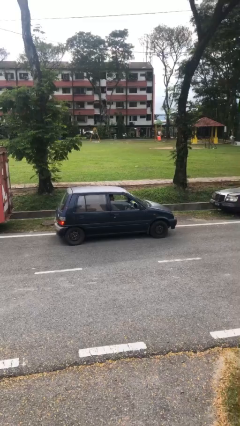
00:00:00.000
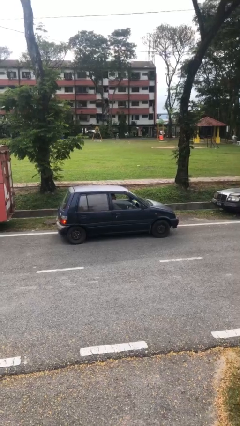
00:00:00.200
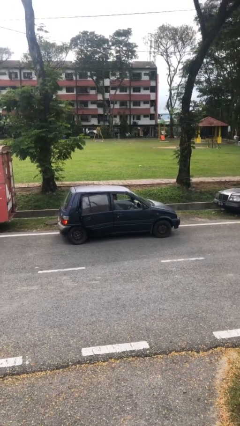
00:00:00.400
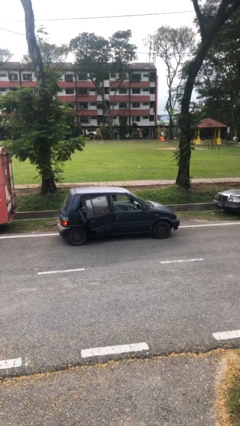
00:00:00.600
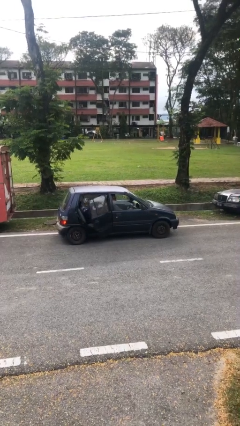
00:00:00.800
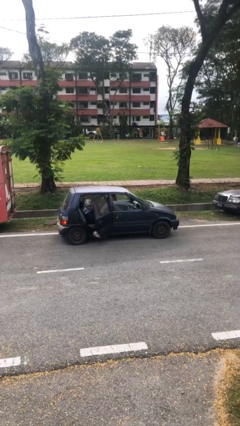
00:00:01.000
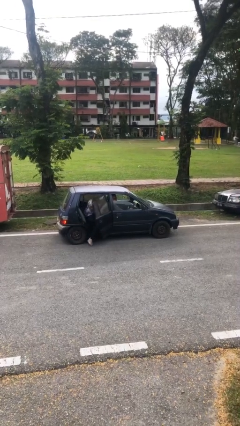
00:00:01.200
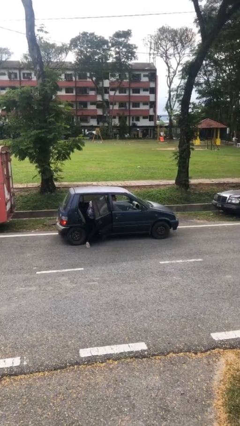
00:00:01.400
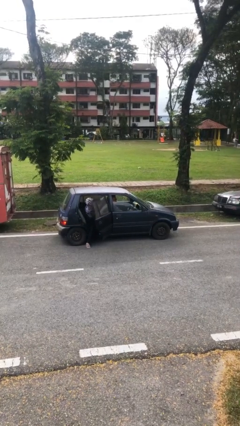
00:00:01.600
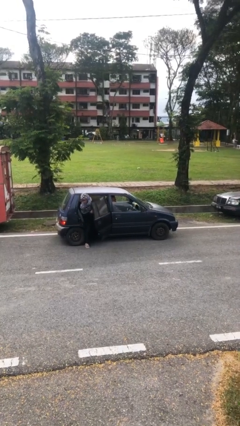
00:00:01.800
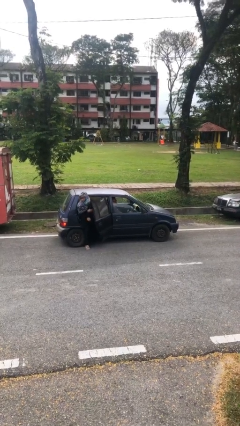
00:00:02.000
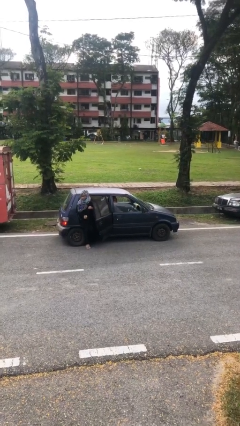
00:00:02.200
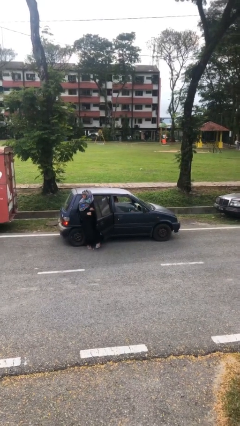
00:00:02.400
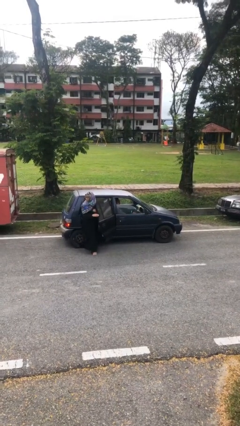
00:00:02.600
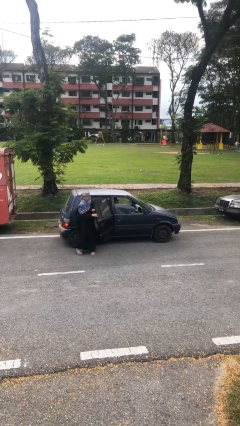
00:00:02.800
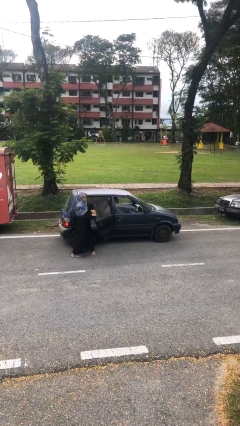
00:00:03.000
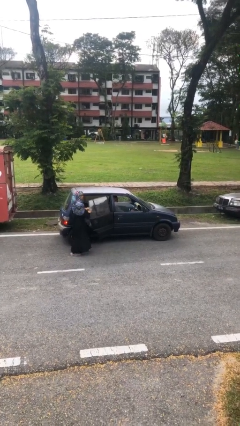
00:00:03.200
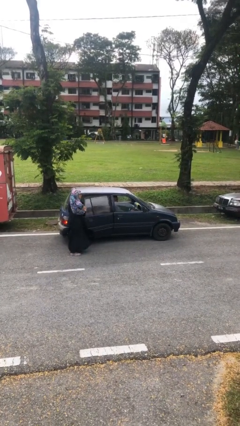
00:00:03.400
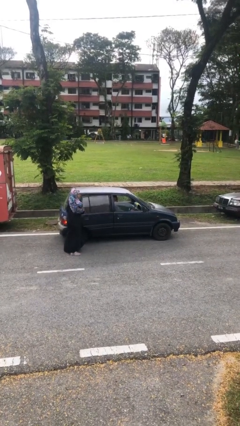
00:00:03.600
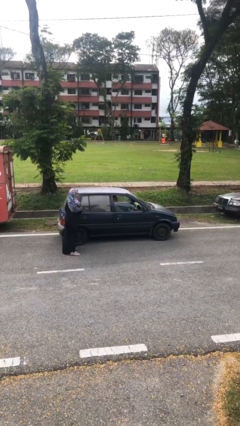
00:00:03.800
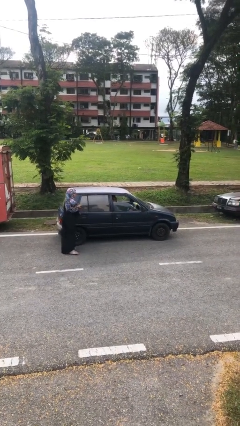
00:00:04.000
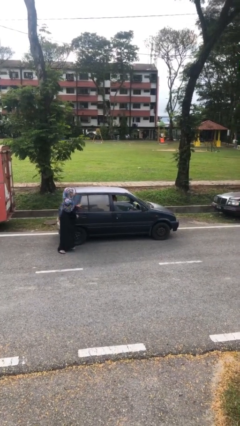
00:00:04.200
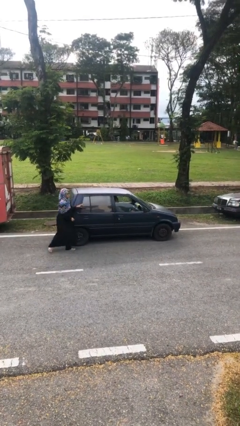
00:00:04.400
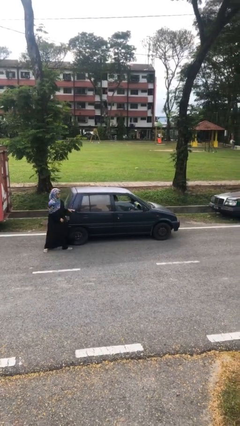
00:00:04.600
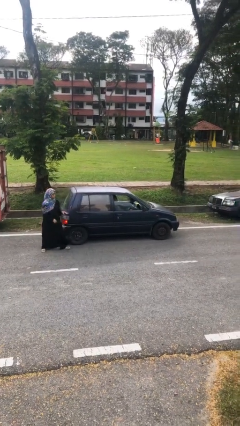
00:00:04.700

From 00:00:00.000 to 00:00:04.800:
car drops off person

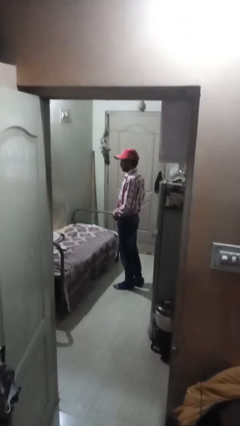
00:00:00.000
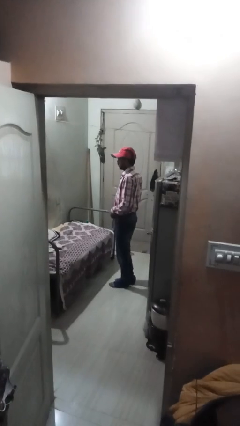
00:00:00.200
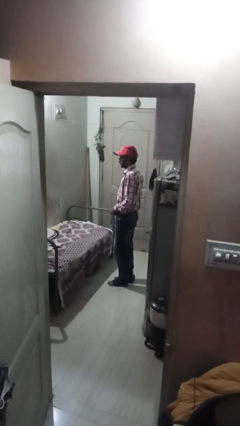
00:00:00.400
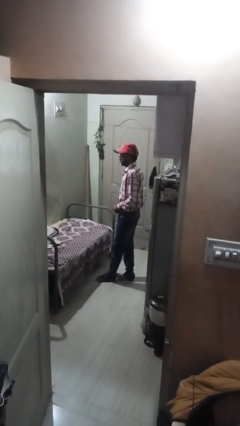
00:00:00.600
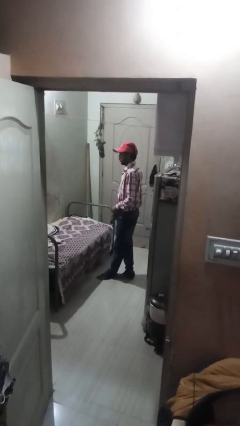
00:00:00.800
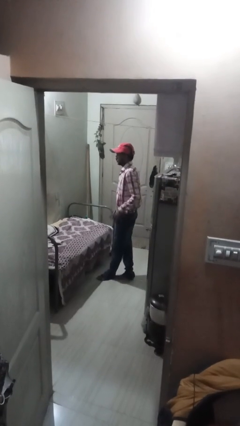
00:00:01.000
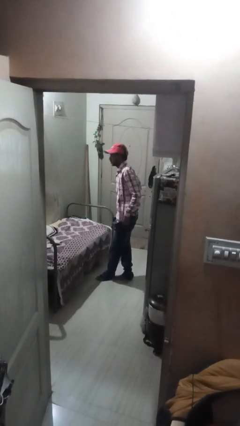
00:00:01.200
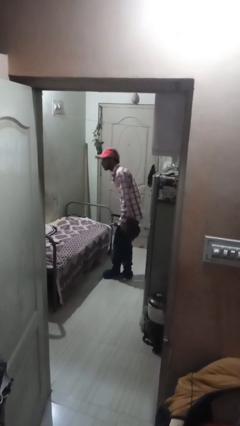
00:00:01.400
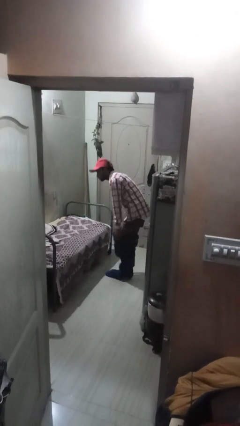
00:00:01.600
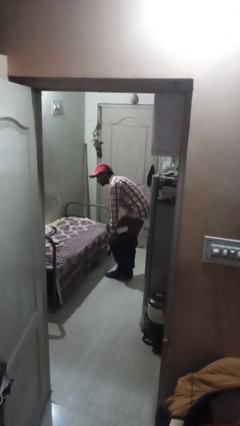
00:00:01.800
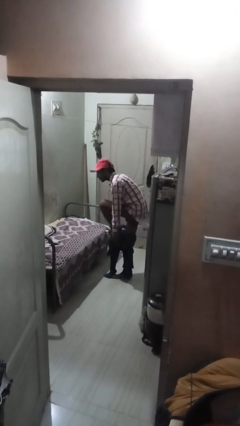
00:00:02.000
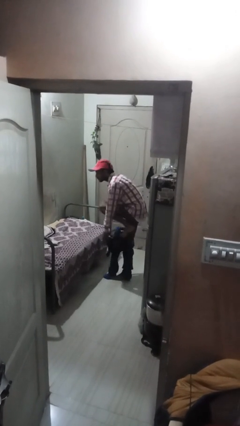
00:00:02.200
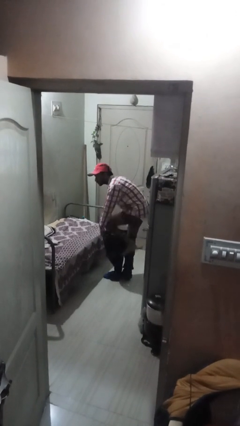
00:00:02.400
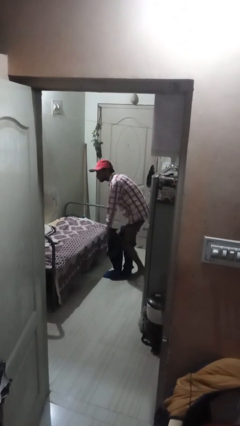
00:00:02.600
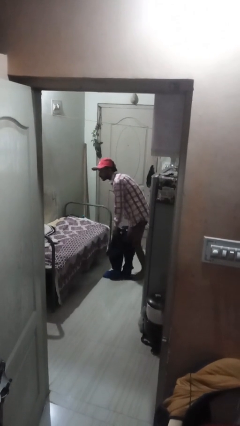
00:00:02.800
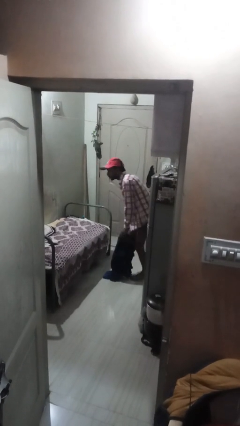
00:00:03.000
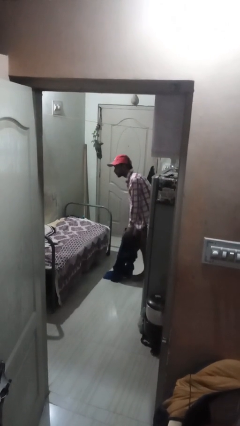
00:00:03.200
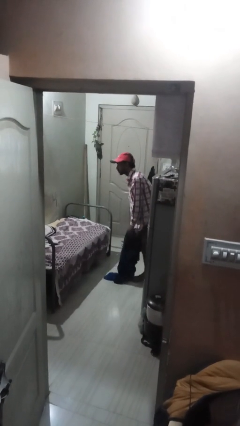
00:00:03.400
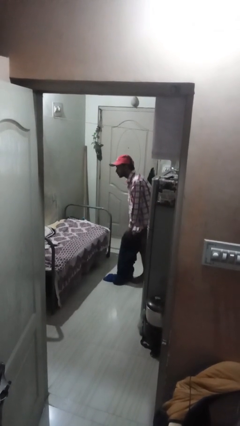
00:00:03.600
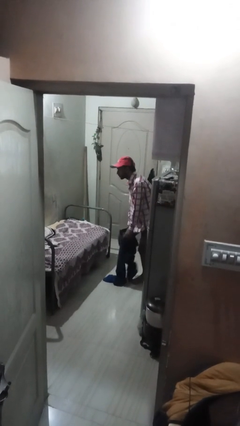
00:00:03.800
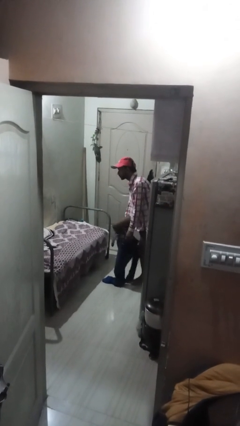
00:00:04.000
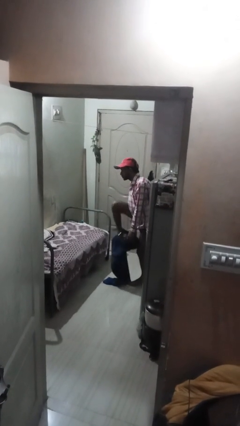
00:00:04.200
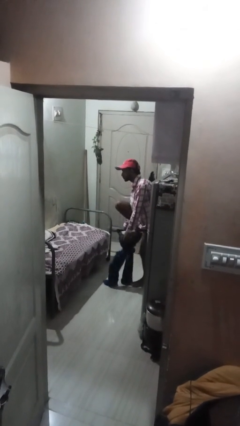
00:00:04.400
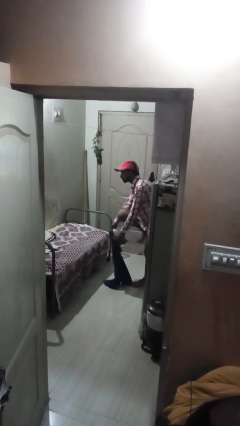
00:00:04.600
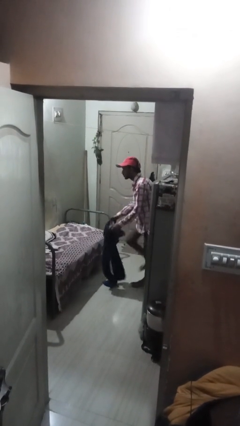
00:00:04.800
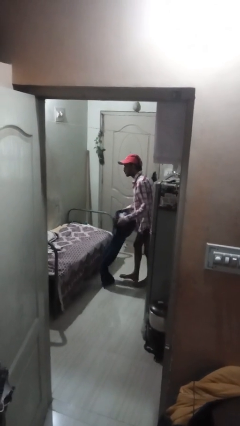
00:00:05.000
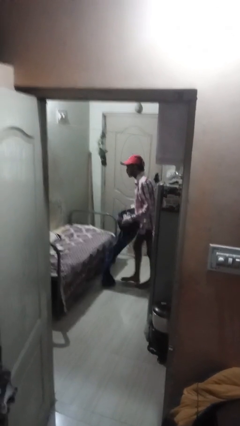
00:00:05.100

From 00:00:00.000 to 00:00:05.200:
person takes off pants

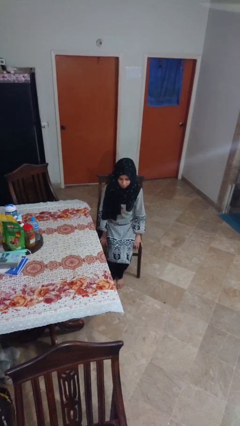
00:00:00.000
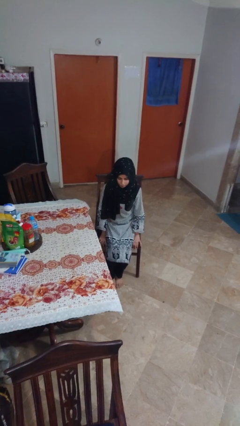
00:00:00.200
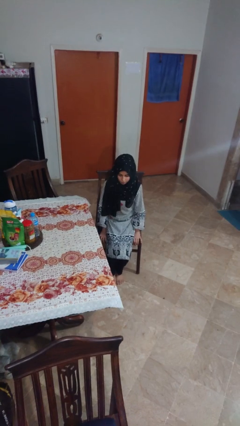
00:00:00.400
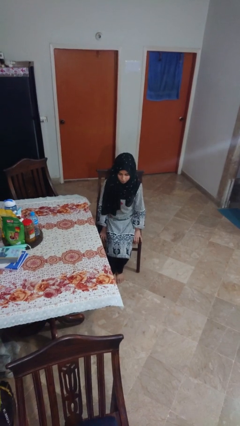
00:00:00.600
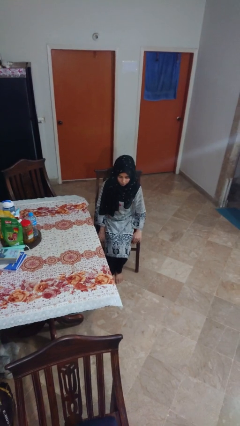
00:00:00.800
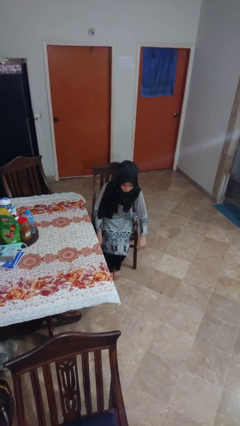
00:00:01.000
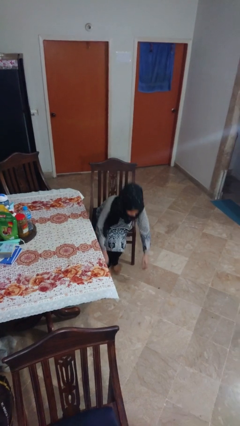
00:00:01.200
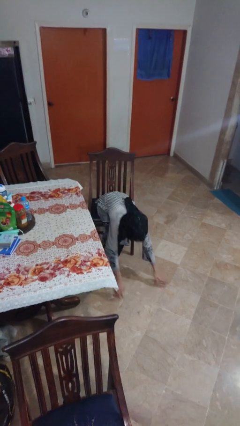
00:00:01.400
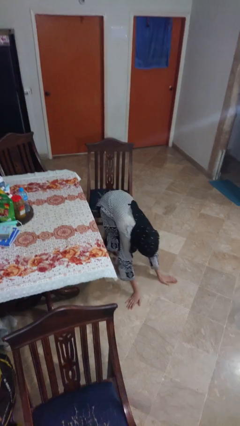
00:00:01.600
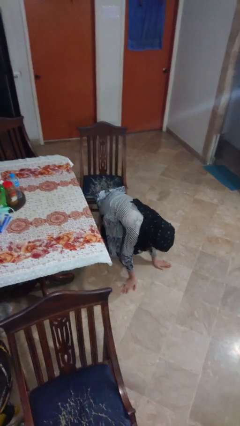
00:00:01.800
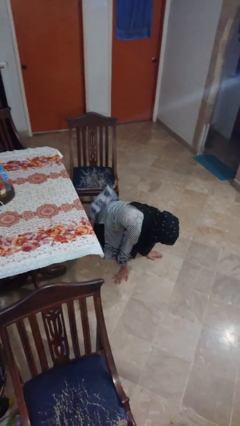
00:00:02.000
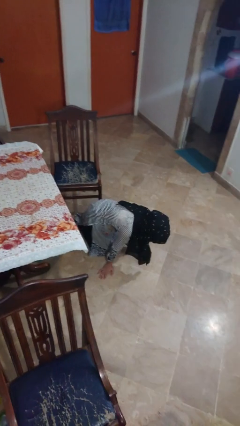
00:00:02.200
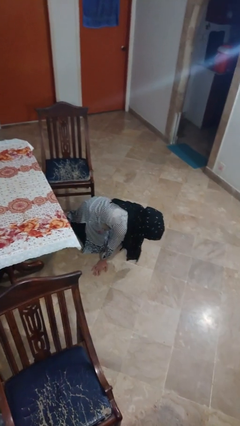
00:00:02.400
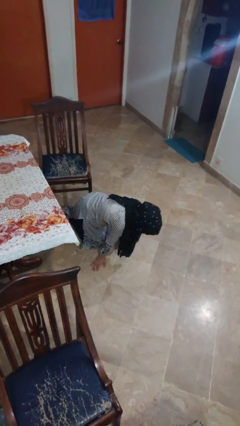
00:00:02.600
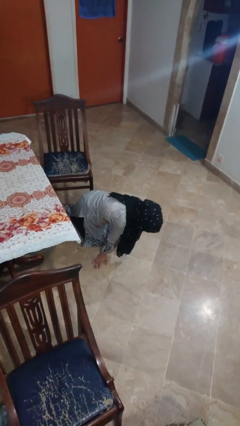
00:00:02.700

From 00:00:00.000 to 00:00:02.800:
person falls from chair

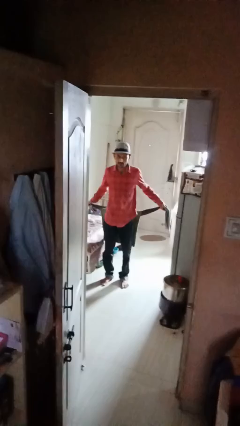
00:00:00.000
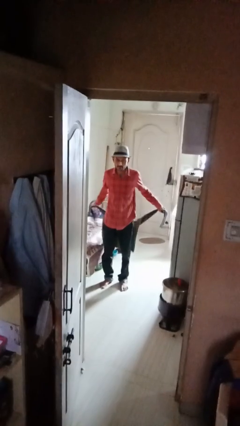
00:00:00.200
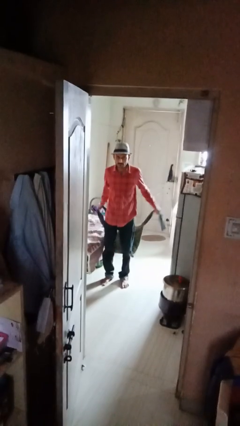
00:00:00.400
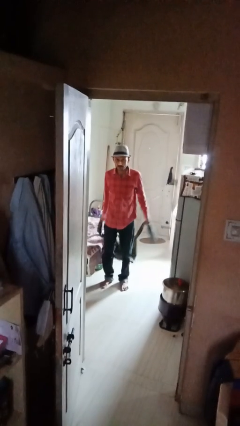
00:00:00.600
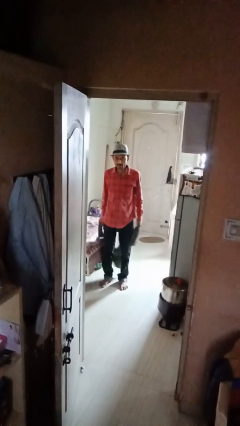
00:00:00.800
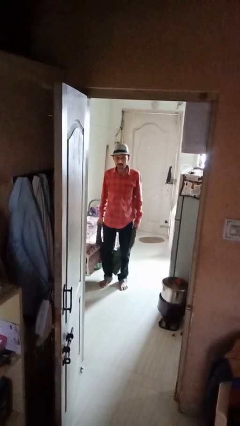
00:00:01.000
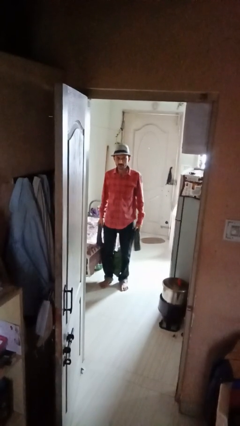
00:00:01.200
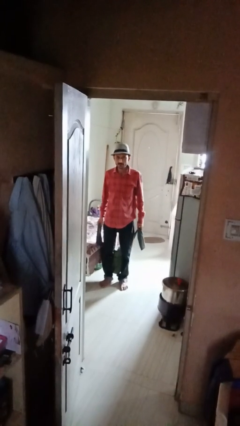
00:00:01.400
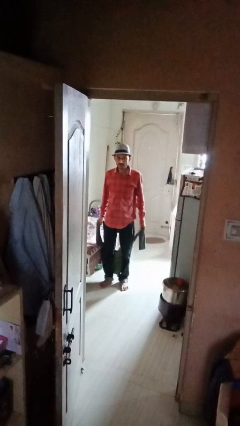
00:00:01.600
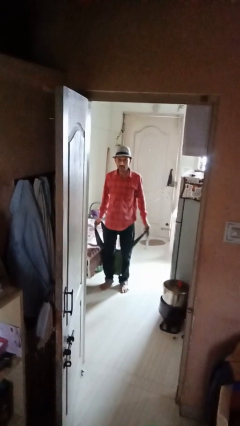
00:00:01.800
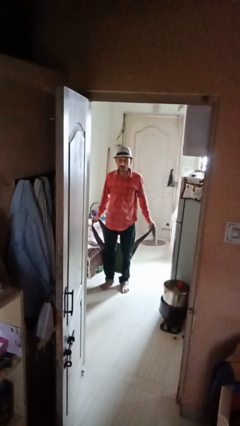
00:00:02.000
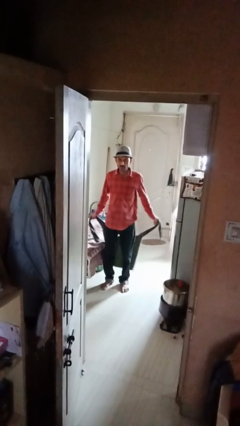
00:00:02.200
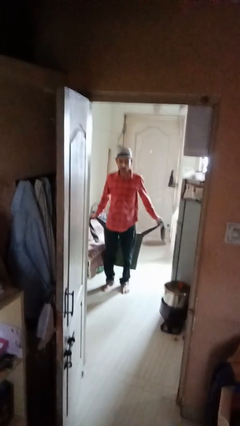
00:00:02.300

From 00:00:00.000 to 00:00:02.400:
person unties jacket around waist

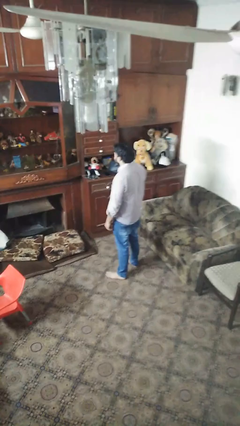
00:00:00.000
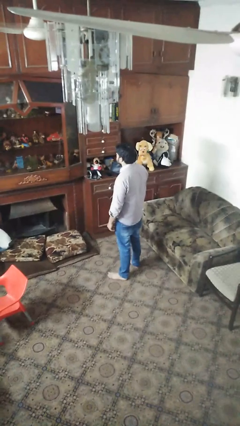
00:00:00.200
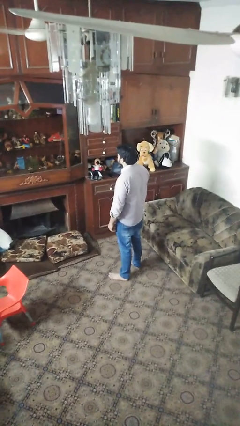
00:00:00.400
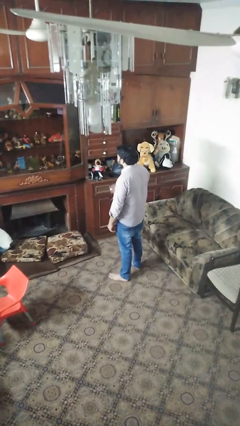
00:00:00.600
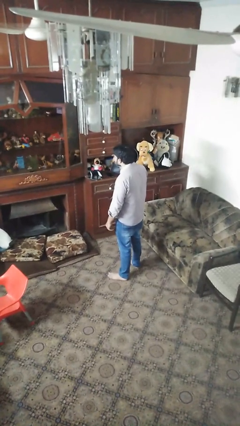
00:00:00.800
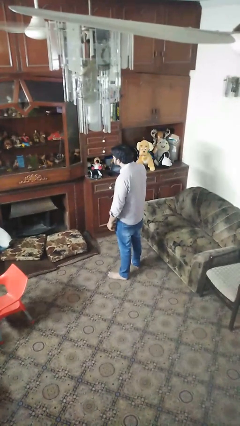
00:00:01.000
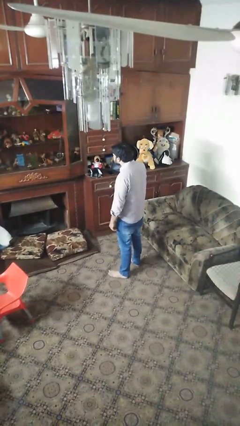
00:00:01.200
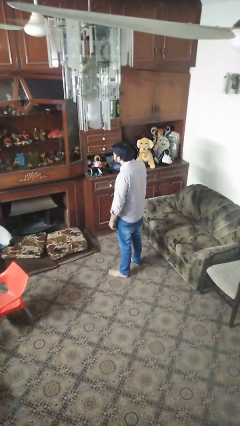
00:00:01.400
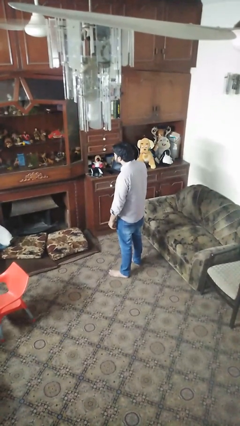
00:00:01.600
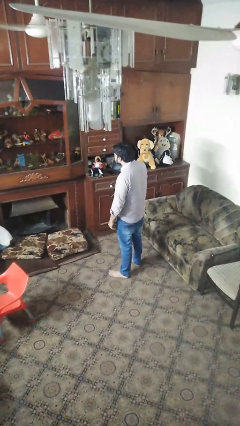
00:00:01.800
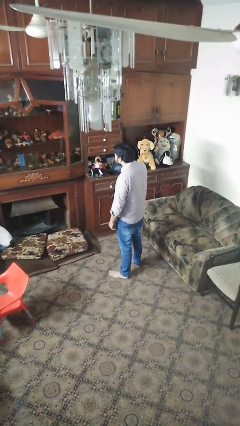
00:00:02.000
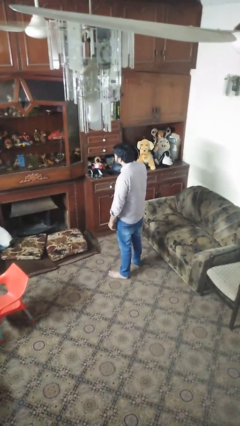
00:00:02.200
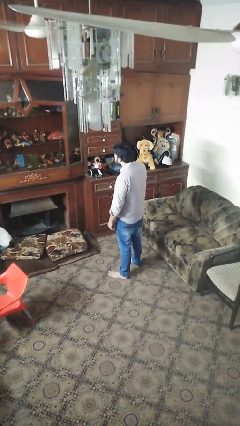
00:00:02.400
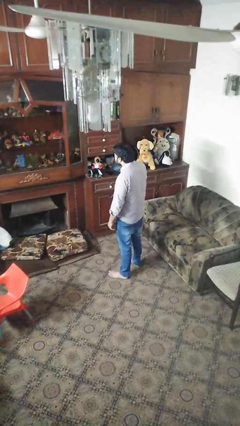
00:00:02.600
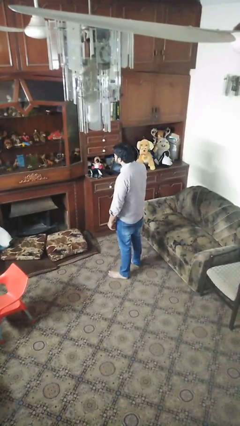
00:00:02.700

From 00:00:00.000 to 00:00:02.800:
person gestures listen closely
